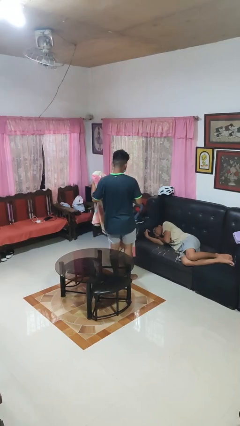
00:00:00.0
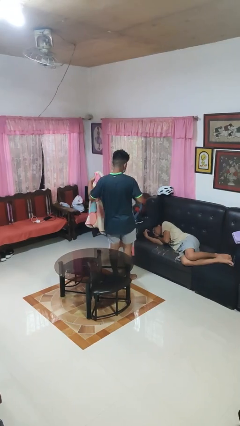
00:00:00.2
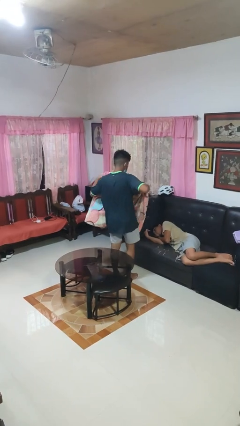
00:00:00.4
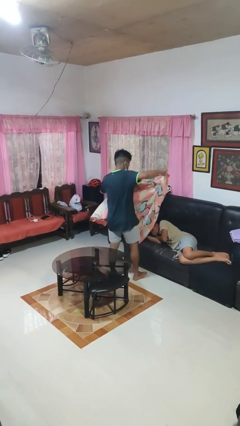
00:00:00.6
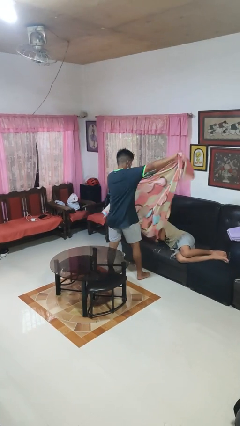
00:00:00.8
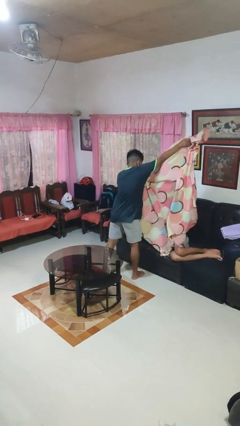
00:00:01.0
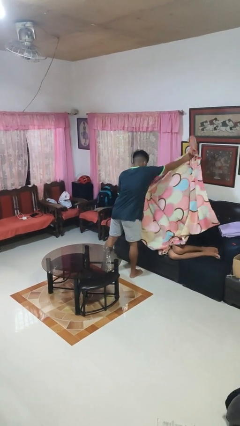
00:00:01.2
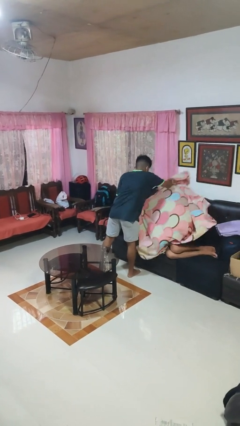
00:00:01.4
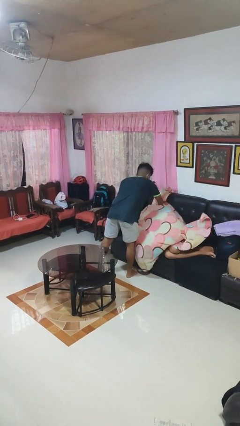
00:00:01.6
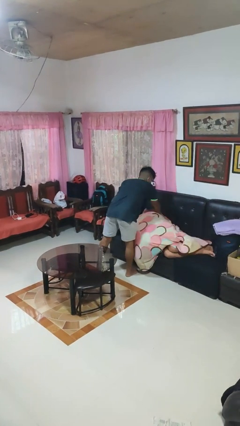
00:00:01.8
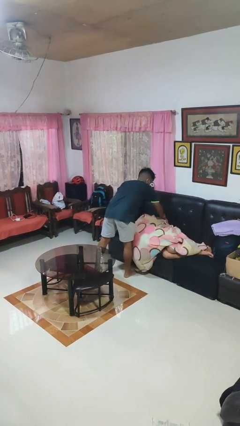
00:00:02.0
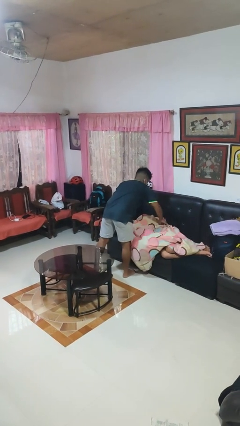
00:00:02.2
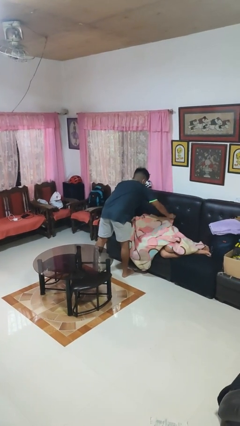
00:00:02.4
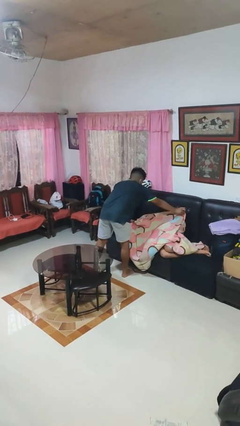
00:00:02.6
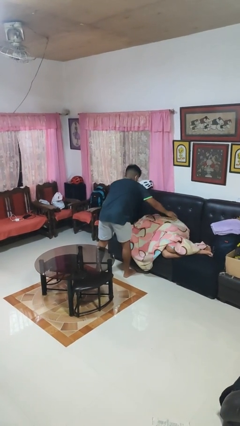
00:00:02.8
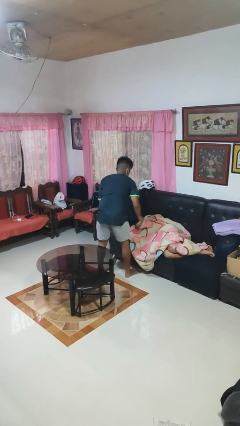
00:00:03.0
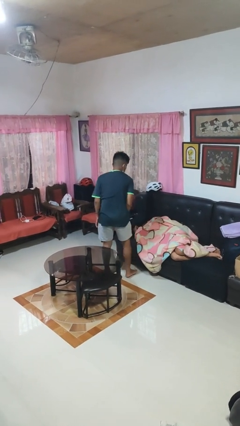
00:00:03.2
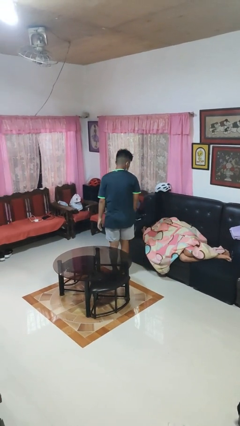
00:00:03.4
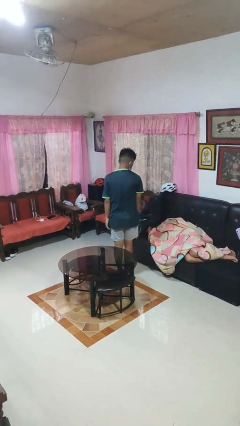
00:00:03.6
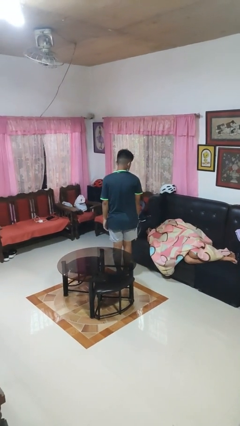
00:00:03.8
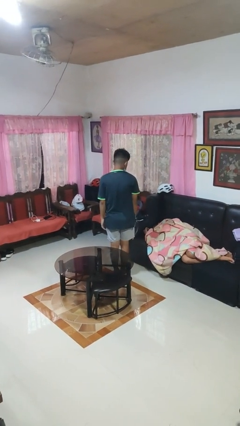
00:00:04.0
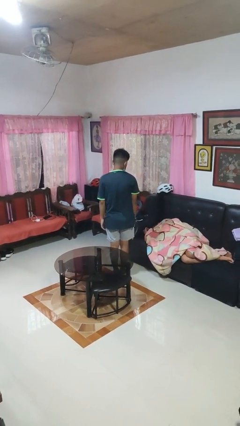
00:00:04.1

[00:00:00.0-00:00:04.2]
person covers friend with blanket

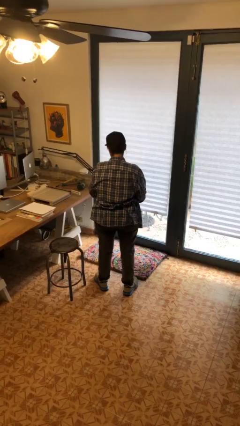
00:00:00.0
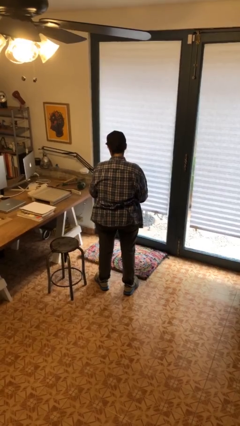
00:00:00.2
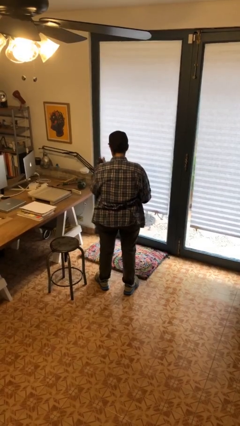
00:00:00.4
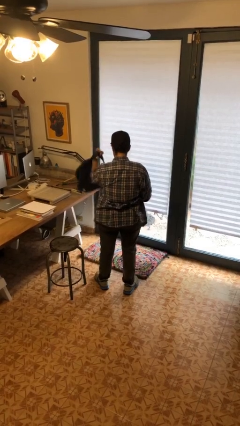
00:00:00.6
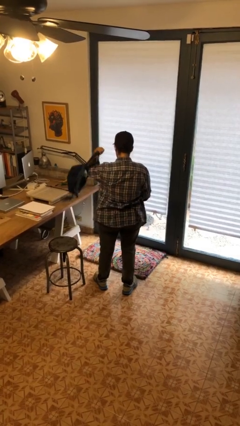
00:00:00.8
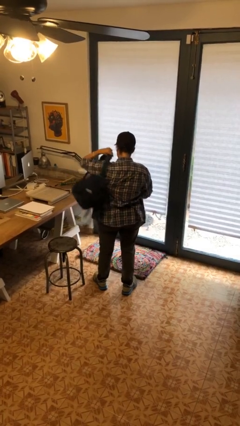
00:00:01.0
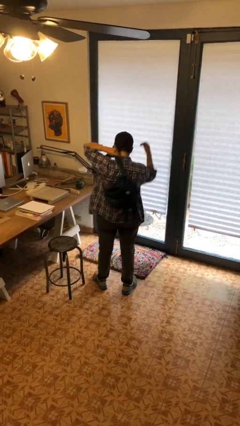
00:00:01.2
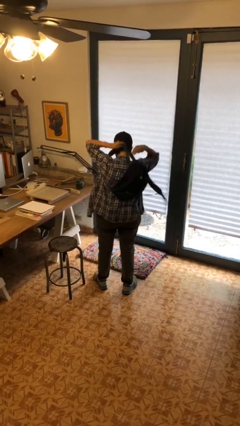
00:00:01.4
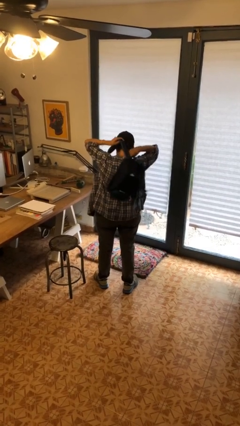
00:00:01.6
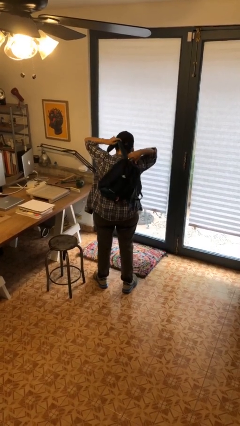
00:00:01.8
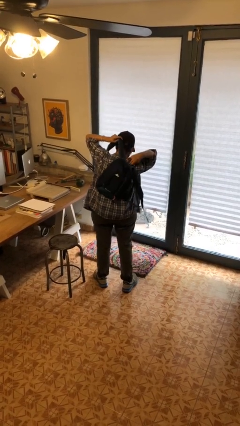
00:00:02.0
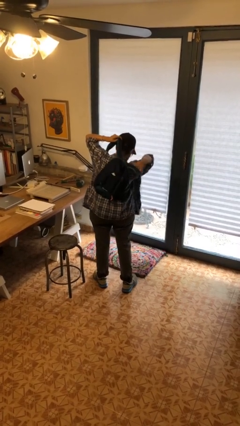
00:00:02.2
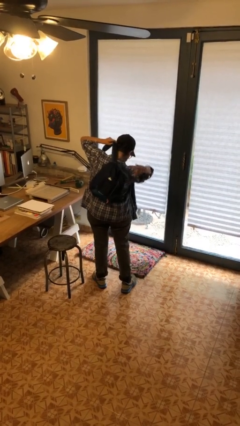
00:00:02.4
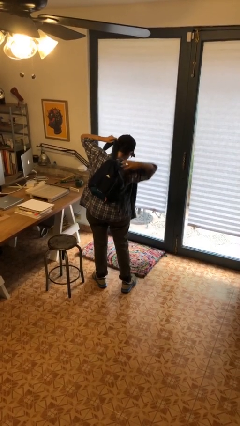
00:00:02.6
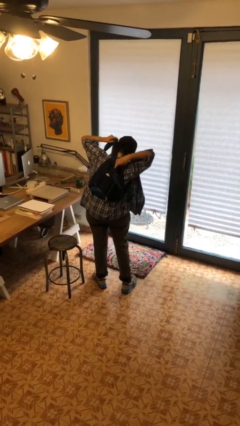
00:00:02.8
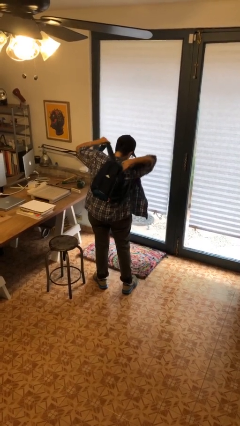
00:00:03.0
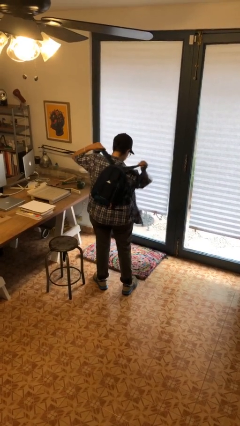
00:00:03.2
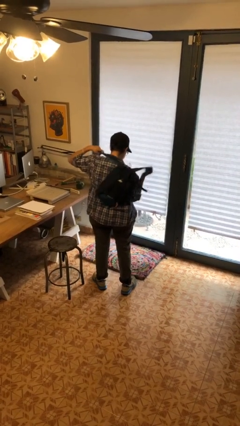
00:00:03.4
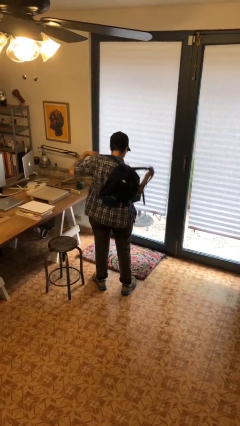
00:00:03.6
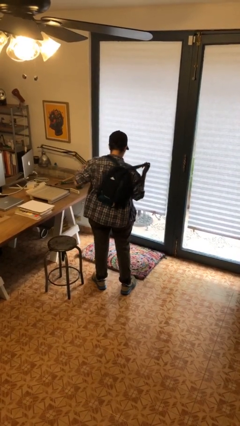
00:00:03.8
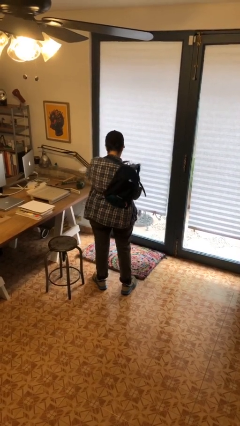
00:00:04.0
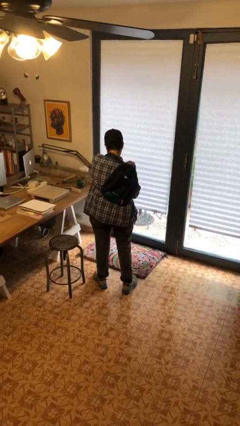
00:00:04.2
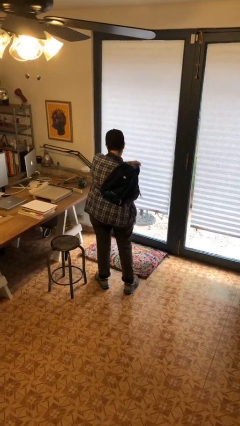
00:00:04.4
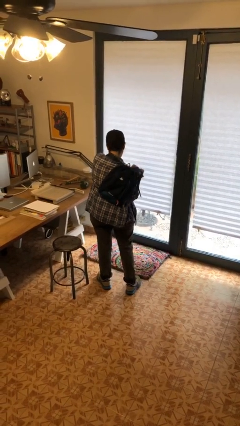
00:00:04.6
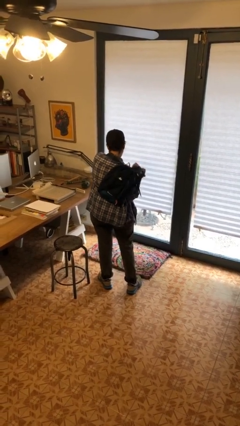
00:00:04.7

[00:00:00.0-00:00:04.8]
person puts on backpack

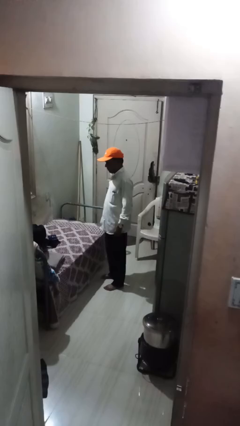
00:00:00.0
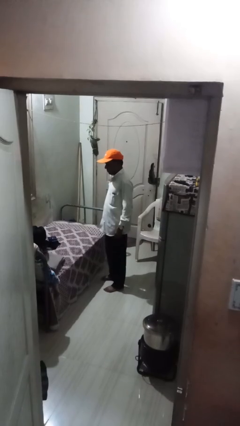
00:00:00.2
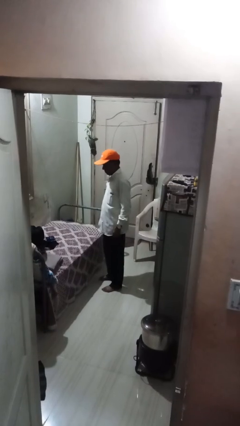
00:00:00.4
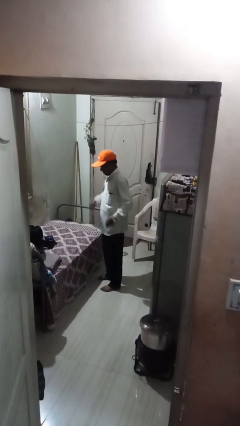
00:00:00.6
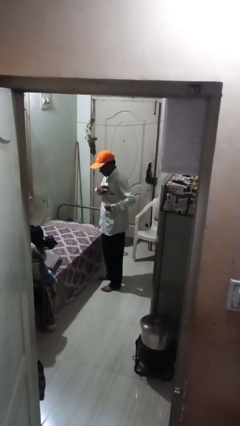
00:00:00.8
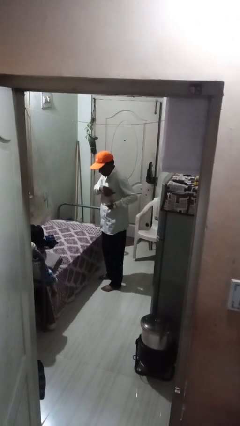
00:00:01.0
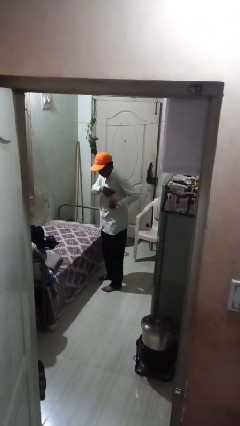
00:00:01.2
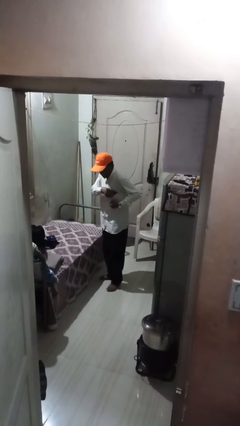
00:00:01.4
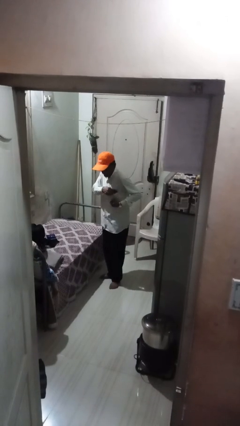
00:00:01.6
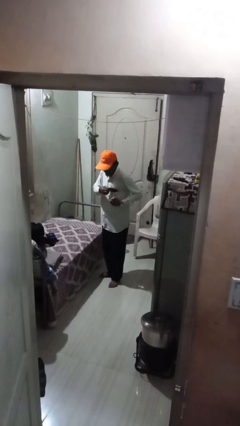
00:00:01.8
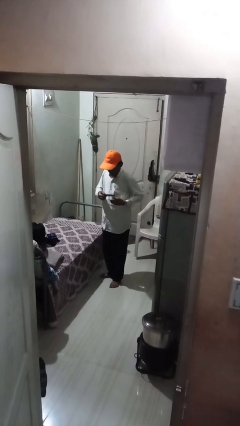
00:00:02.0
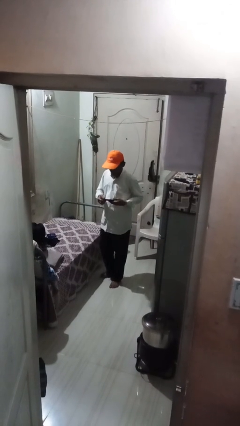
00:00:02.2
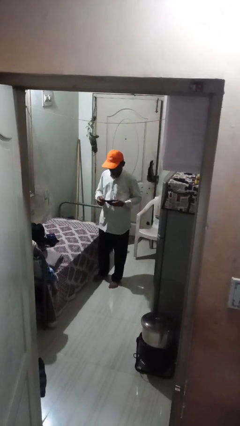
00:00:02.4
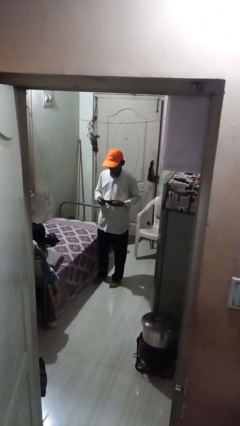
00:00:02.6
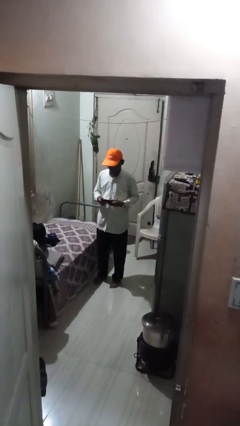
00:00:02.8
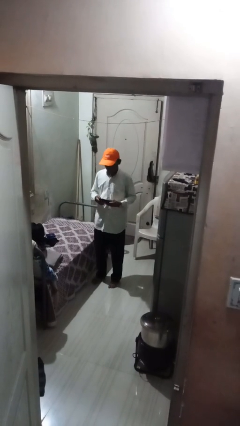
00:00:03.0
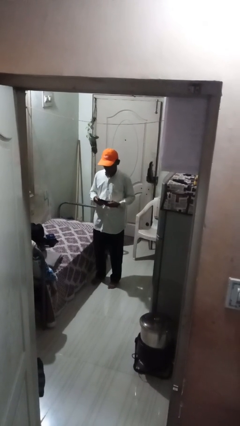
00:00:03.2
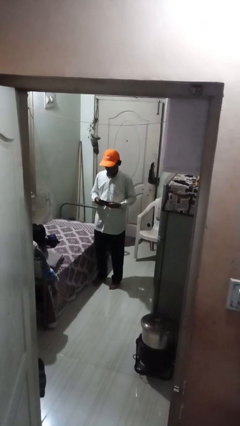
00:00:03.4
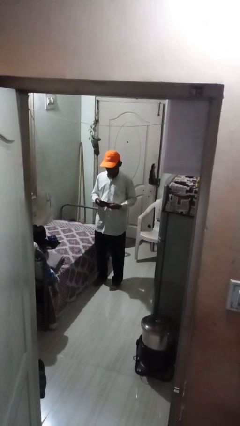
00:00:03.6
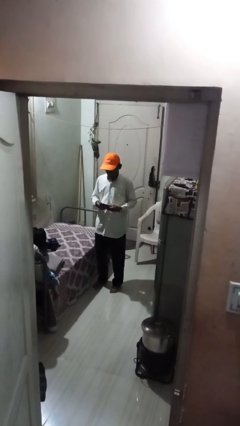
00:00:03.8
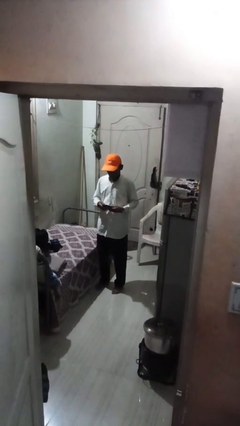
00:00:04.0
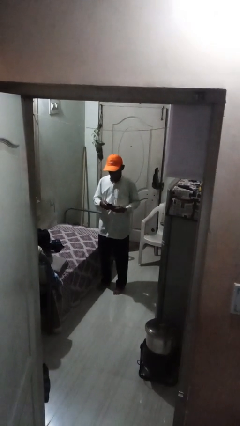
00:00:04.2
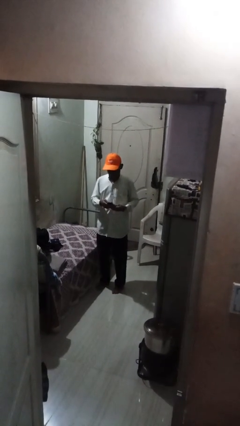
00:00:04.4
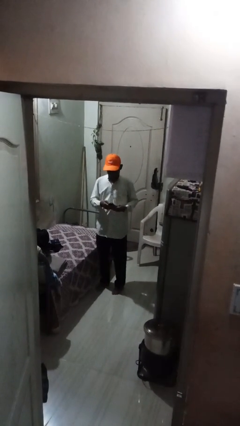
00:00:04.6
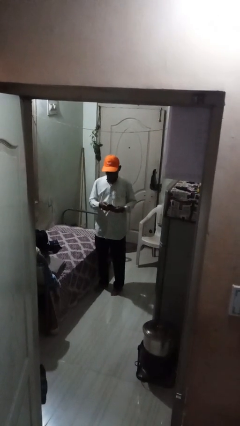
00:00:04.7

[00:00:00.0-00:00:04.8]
person takes phone from pocket

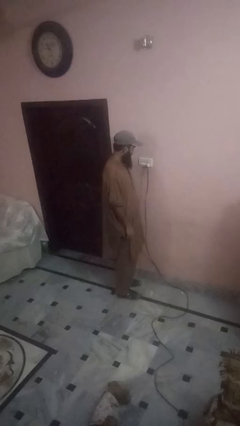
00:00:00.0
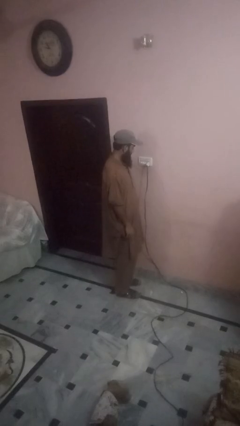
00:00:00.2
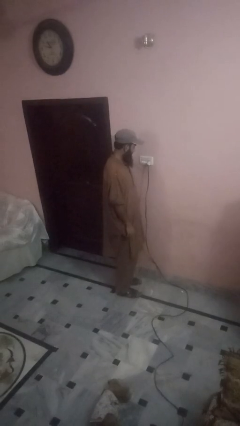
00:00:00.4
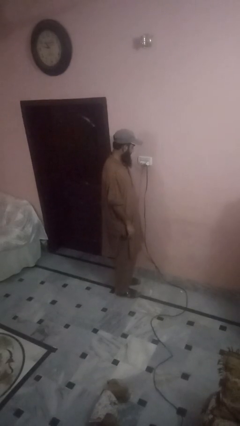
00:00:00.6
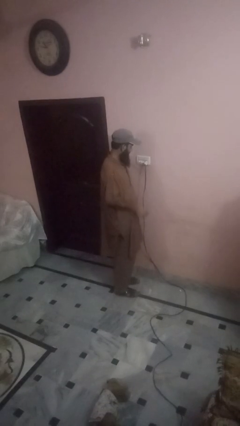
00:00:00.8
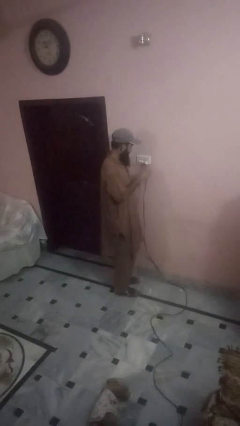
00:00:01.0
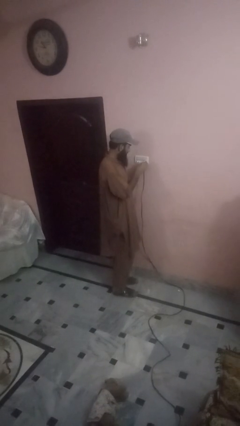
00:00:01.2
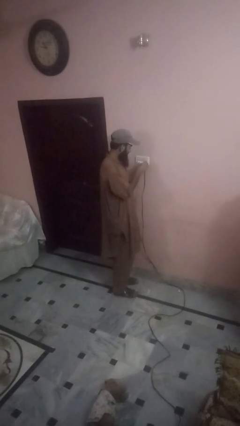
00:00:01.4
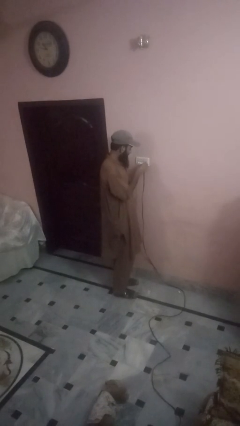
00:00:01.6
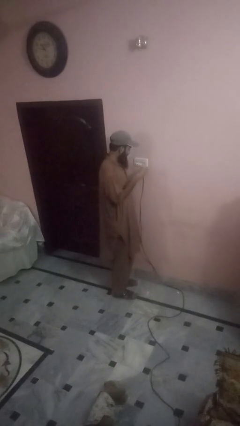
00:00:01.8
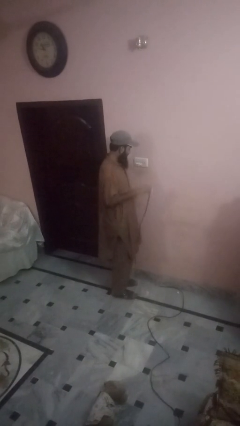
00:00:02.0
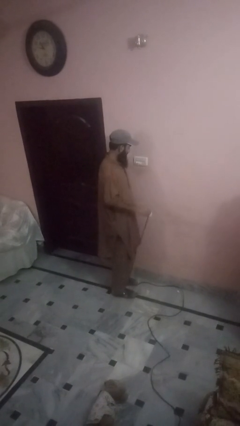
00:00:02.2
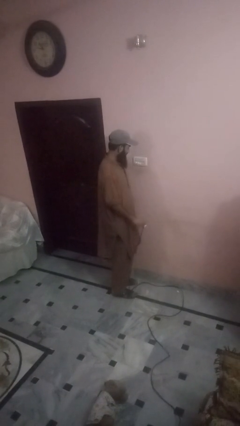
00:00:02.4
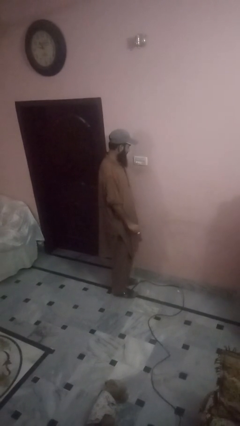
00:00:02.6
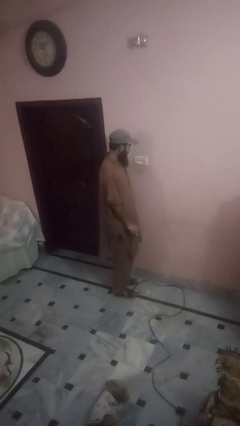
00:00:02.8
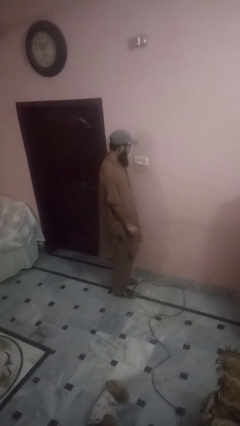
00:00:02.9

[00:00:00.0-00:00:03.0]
person unplugs from electrical socket

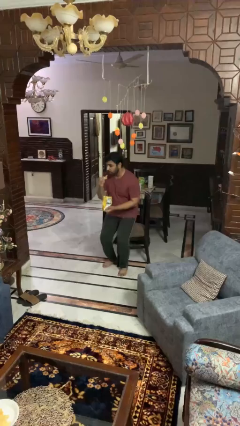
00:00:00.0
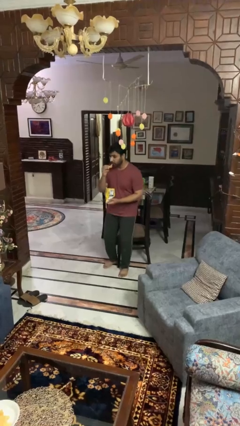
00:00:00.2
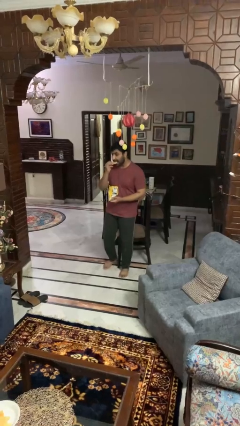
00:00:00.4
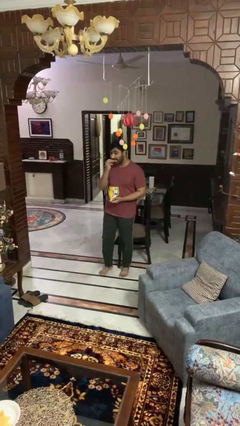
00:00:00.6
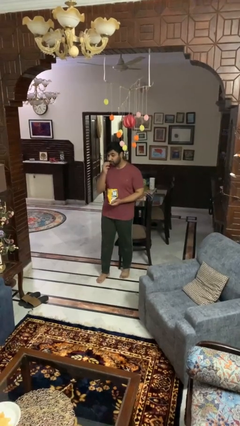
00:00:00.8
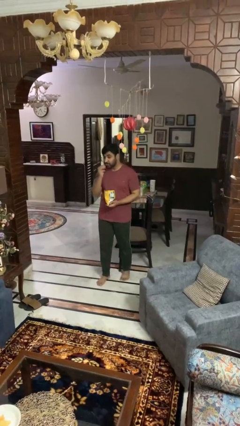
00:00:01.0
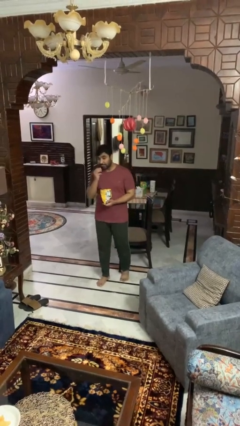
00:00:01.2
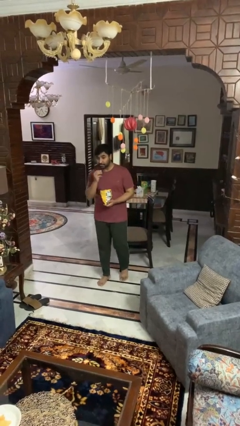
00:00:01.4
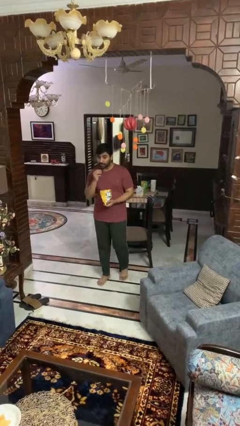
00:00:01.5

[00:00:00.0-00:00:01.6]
person eats snack from bag
